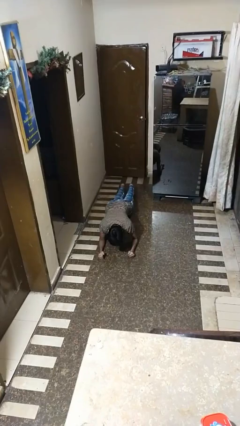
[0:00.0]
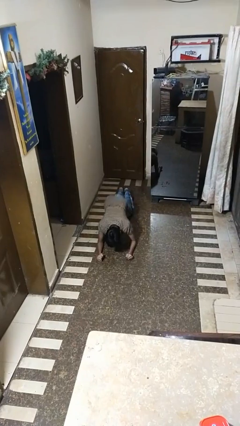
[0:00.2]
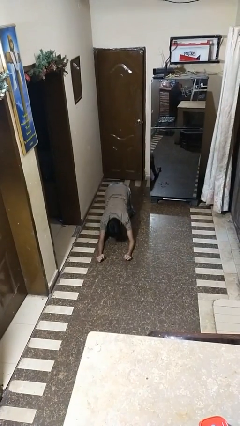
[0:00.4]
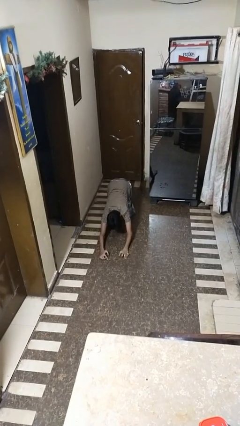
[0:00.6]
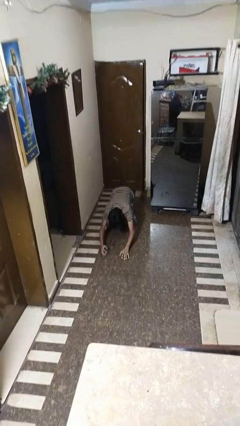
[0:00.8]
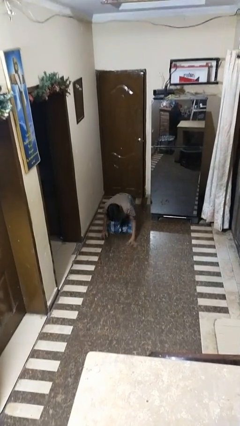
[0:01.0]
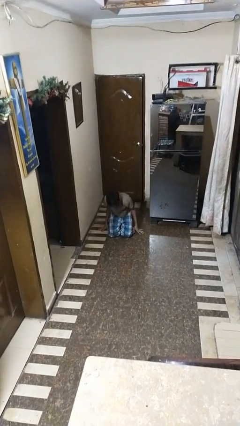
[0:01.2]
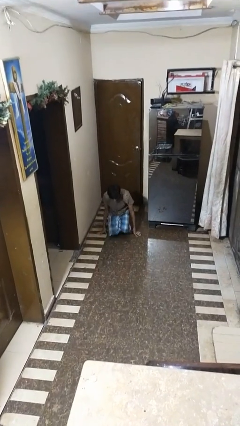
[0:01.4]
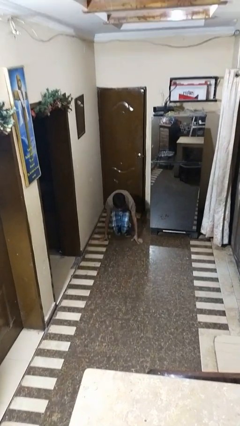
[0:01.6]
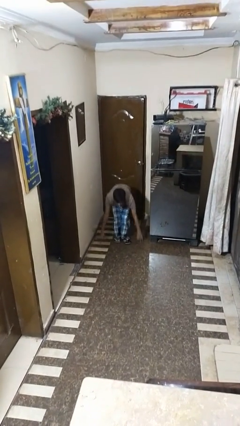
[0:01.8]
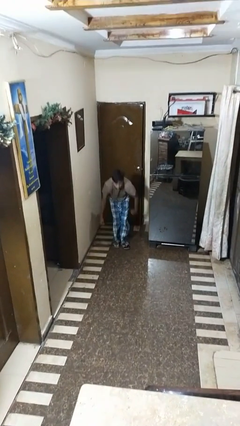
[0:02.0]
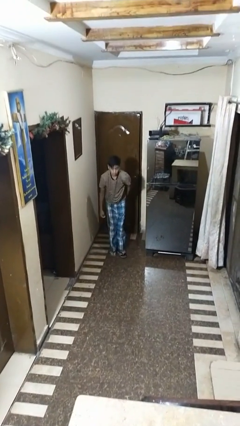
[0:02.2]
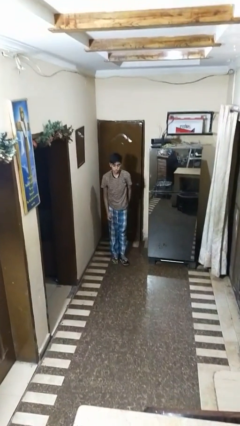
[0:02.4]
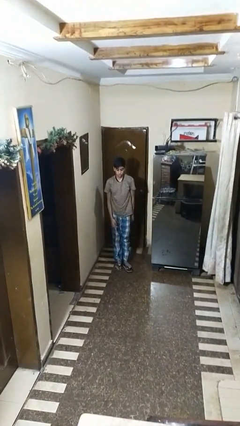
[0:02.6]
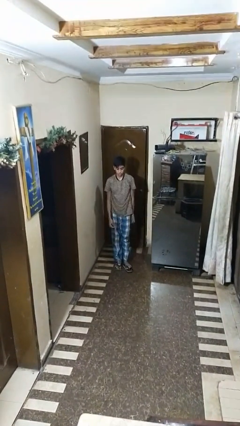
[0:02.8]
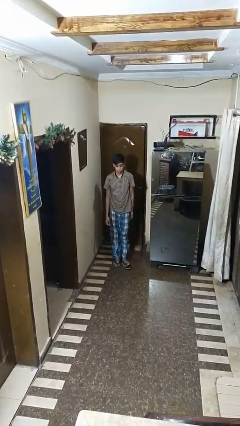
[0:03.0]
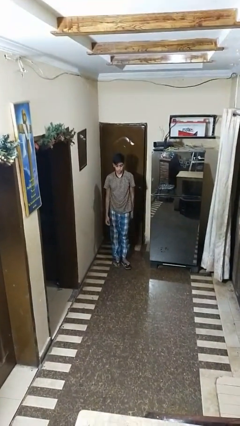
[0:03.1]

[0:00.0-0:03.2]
person stands up from floor

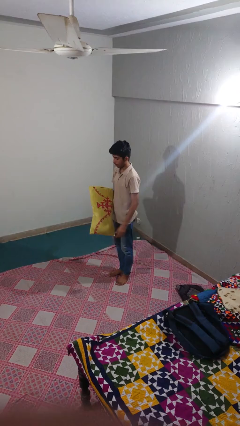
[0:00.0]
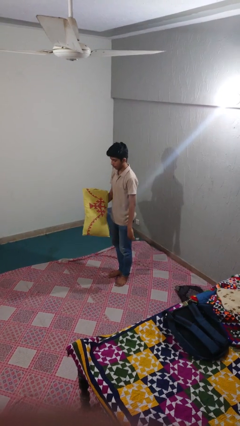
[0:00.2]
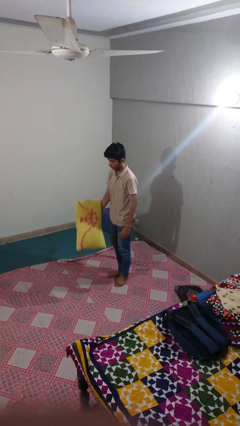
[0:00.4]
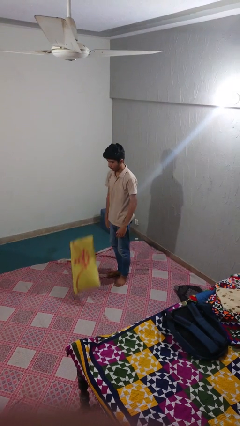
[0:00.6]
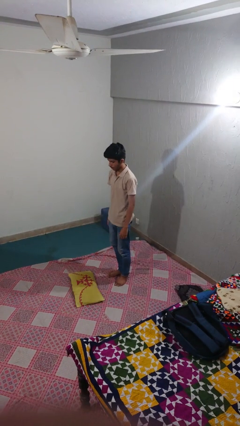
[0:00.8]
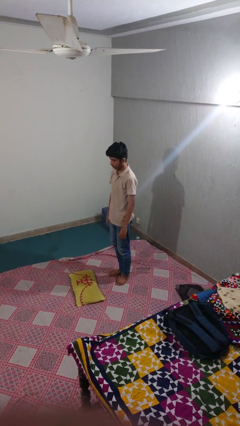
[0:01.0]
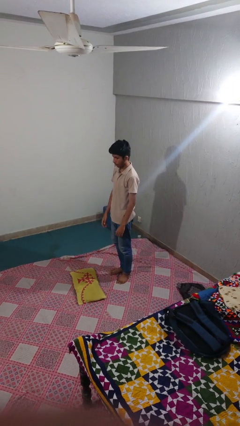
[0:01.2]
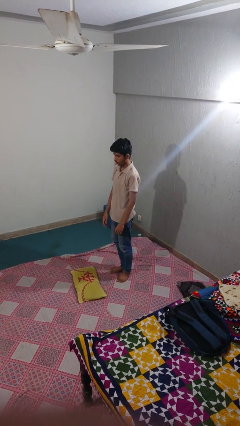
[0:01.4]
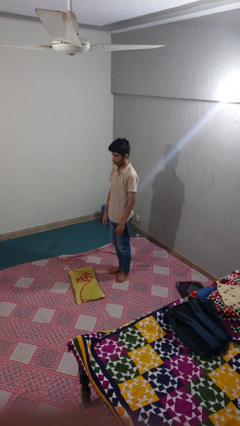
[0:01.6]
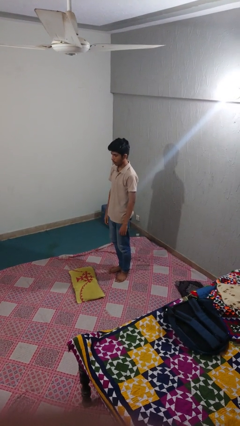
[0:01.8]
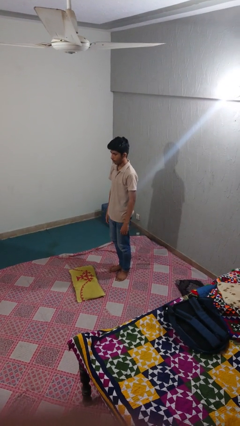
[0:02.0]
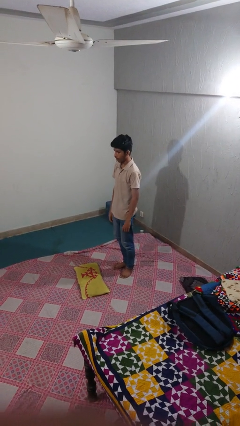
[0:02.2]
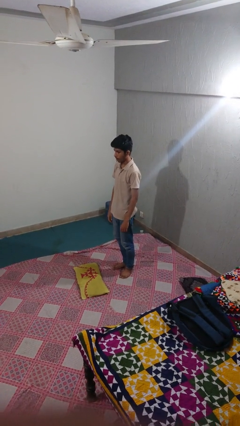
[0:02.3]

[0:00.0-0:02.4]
person drops object

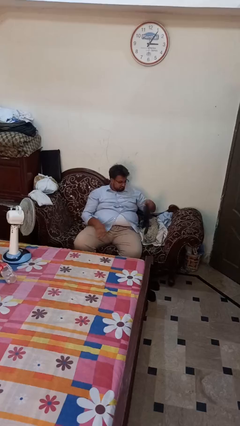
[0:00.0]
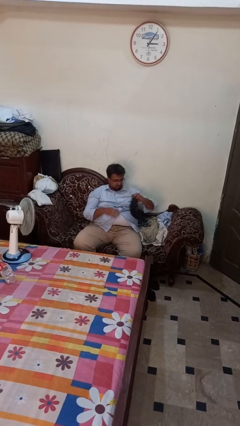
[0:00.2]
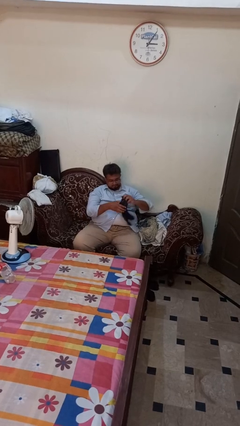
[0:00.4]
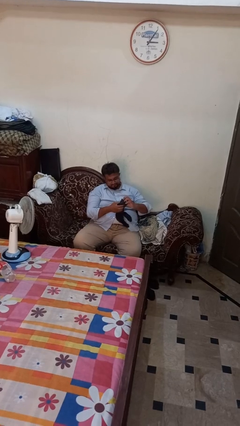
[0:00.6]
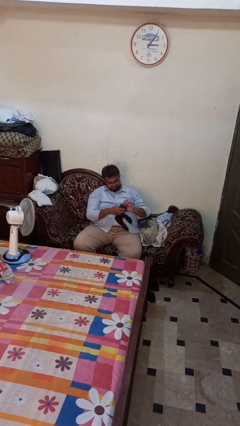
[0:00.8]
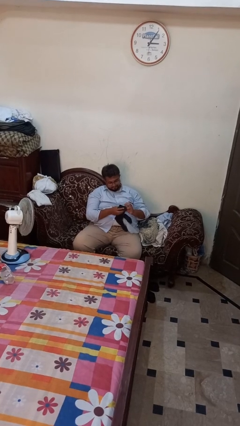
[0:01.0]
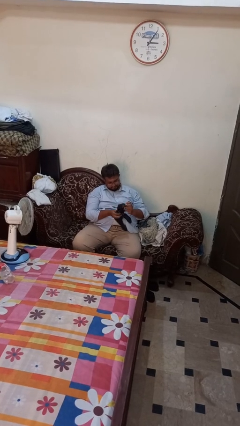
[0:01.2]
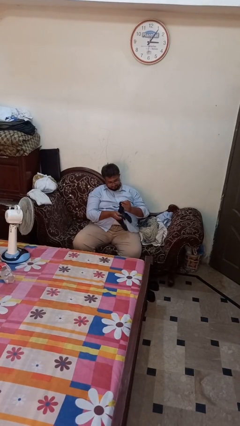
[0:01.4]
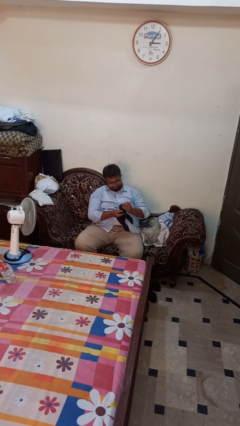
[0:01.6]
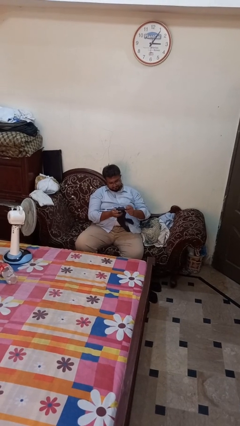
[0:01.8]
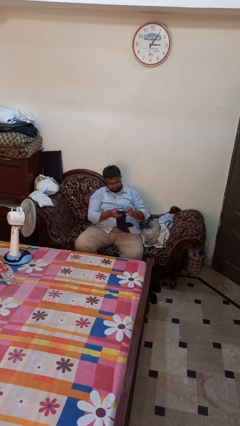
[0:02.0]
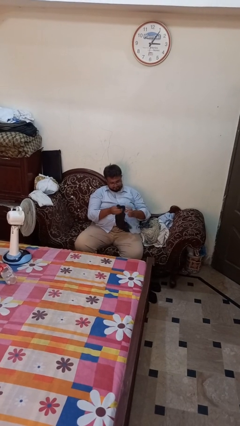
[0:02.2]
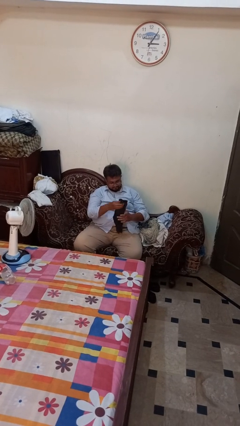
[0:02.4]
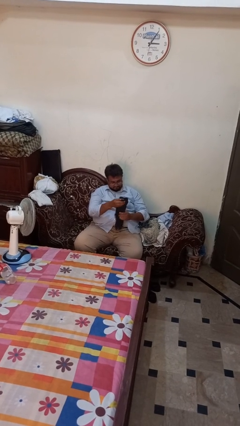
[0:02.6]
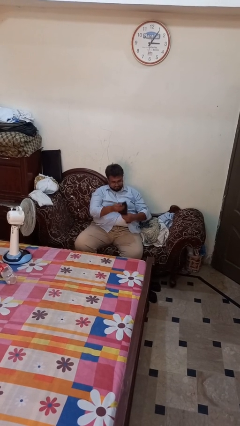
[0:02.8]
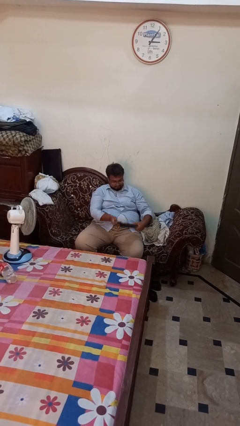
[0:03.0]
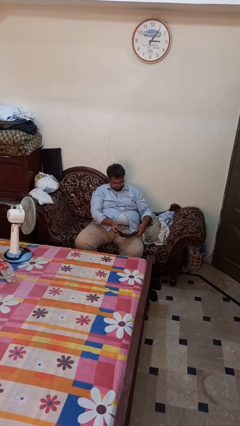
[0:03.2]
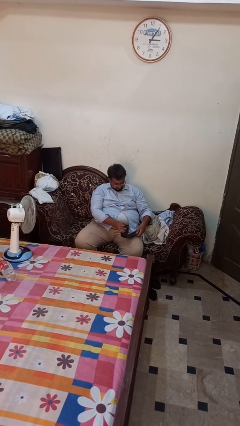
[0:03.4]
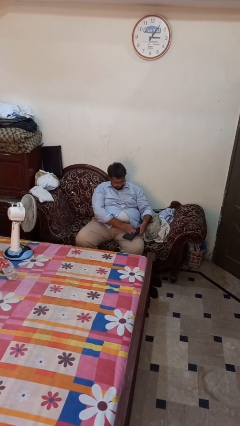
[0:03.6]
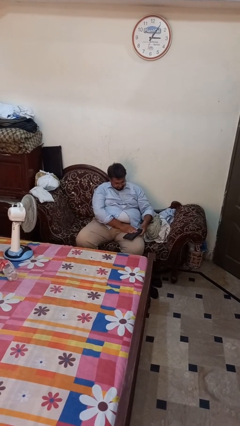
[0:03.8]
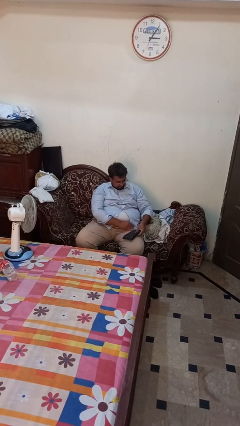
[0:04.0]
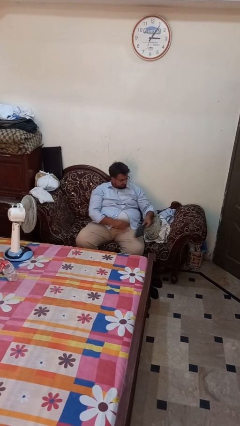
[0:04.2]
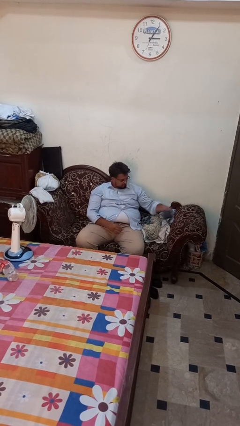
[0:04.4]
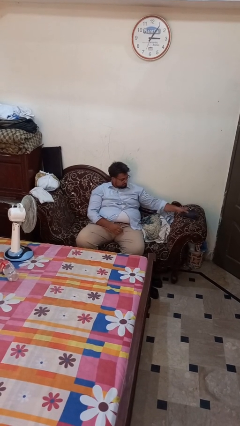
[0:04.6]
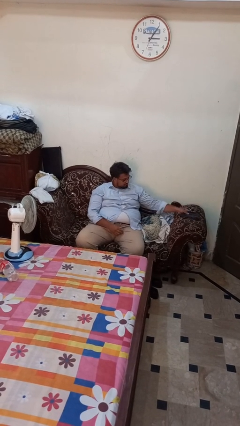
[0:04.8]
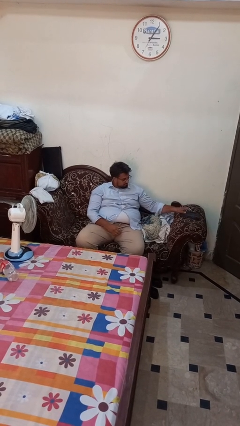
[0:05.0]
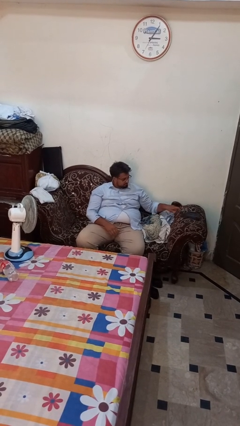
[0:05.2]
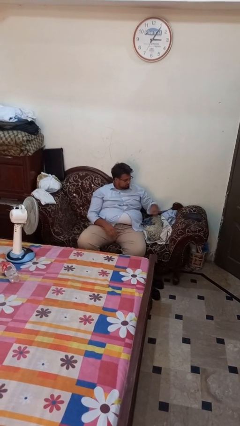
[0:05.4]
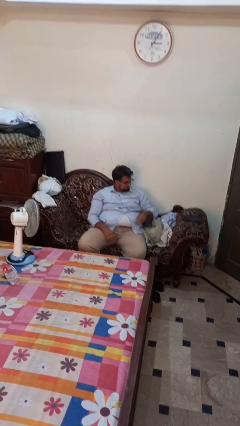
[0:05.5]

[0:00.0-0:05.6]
person folds socks

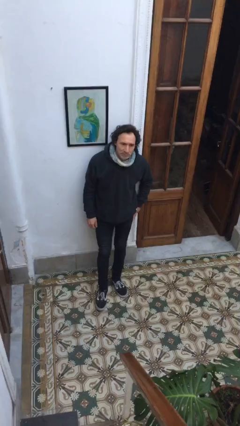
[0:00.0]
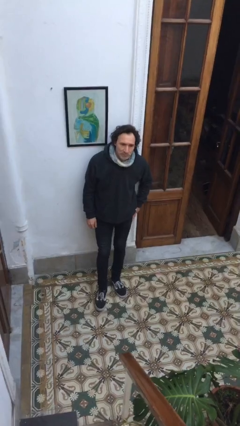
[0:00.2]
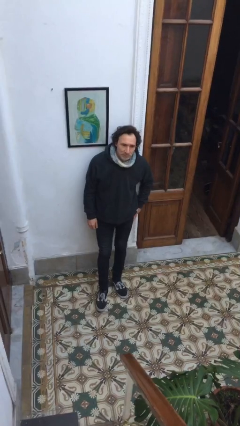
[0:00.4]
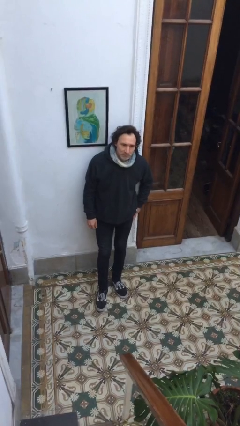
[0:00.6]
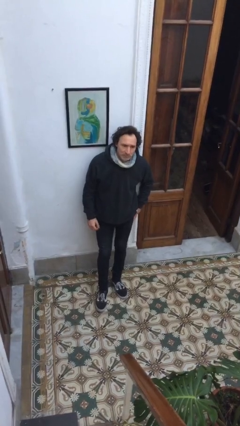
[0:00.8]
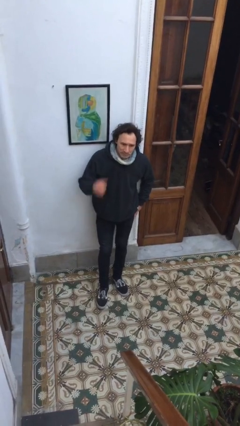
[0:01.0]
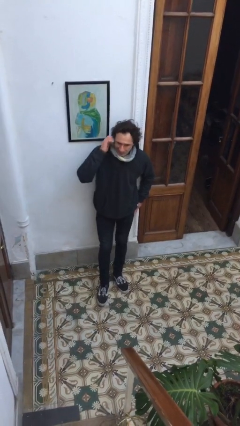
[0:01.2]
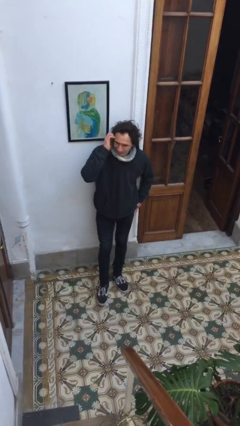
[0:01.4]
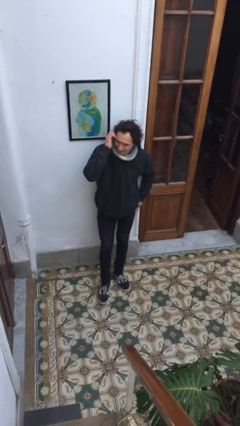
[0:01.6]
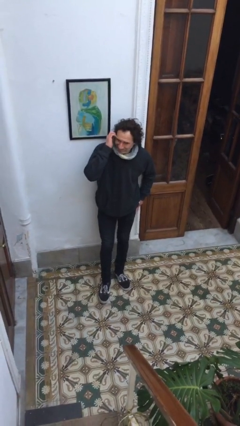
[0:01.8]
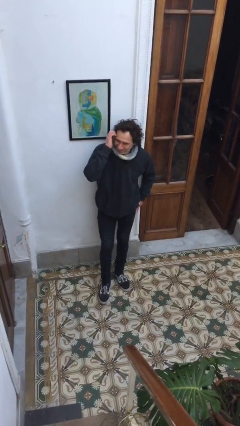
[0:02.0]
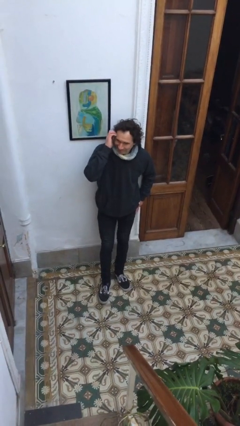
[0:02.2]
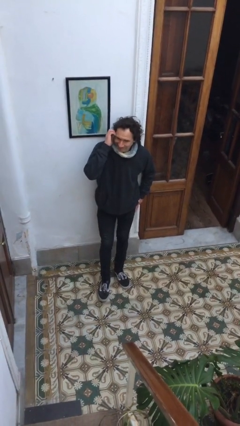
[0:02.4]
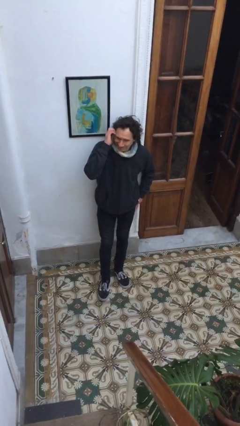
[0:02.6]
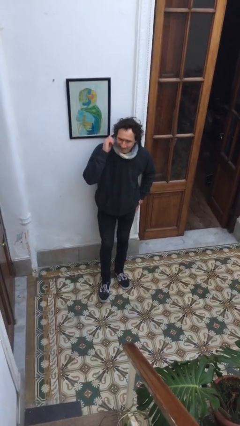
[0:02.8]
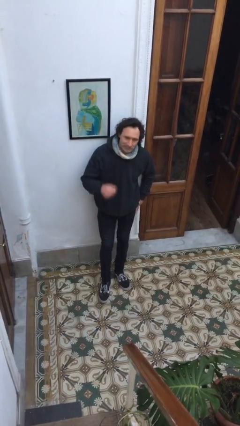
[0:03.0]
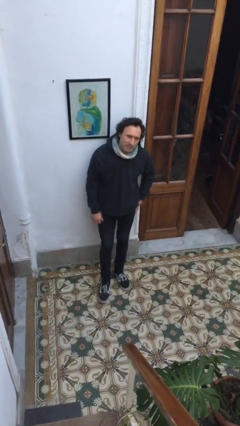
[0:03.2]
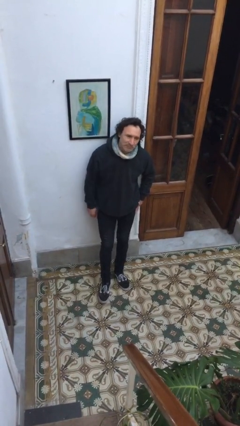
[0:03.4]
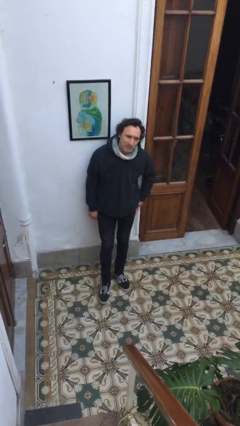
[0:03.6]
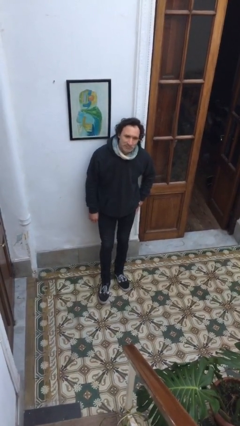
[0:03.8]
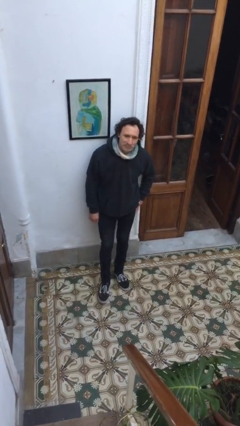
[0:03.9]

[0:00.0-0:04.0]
person scratches face

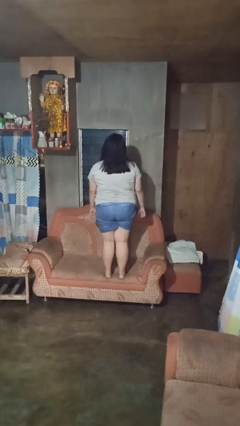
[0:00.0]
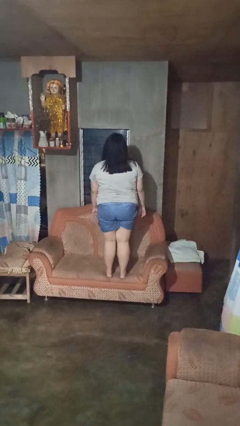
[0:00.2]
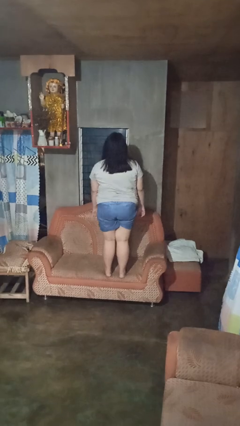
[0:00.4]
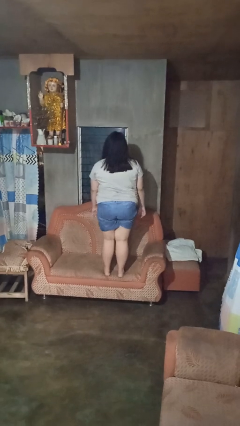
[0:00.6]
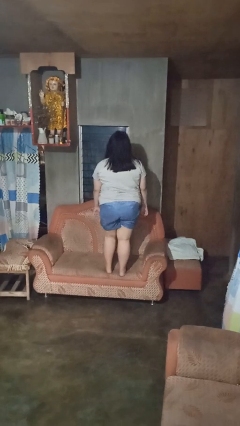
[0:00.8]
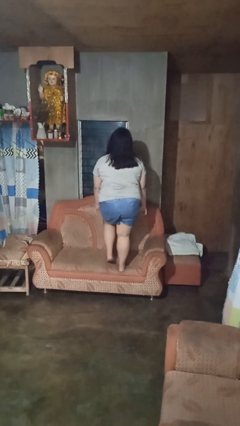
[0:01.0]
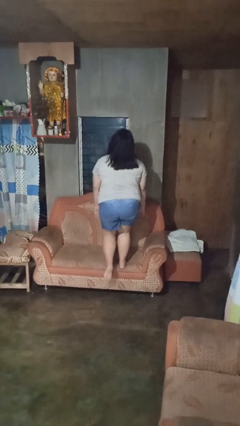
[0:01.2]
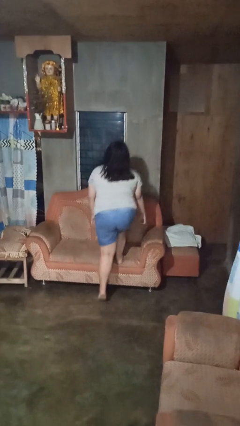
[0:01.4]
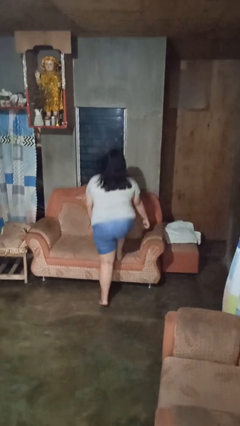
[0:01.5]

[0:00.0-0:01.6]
person climbs off couch

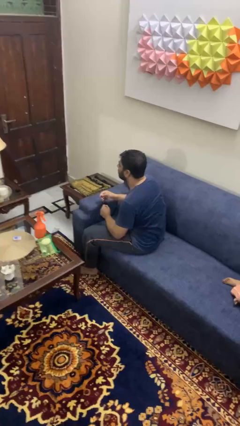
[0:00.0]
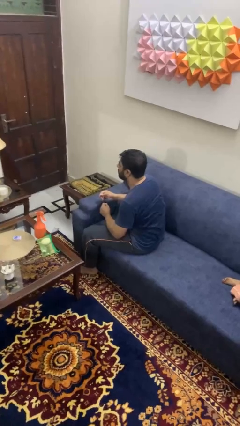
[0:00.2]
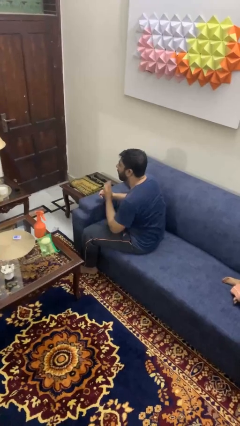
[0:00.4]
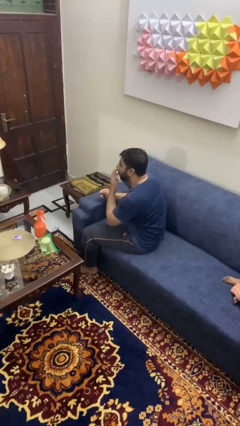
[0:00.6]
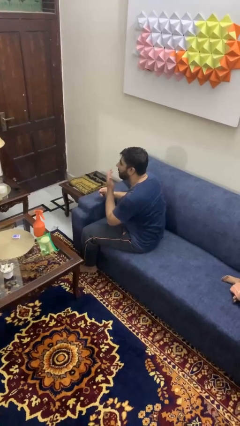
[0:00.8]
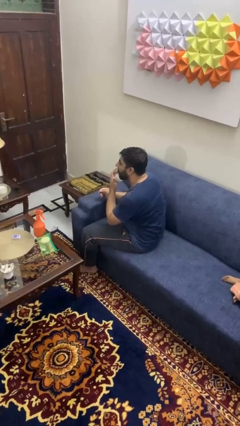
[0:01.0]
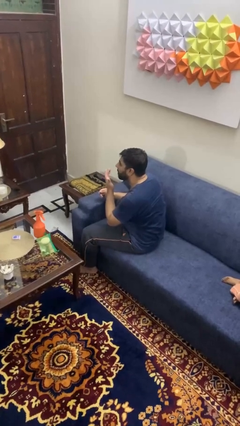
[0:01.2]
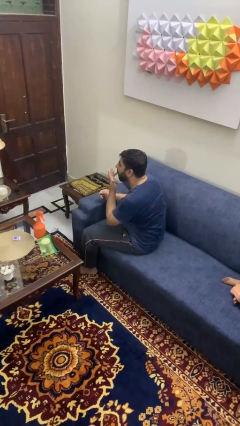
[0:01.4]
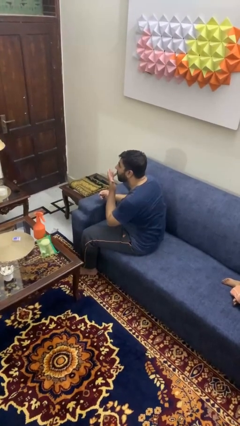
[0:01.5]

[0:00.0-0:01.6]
person licks fingers
